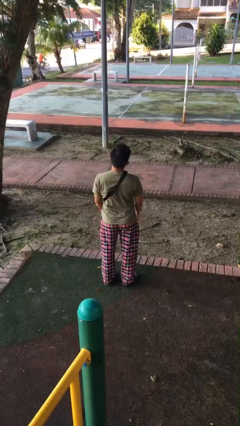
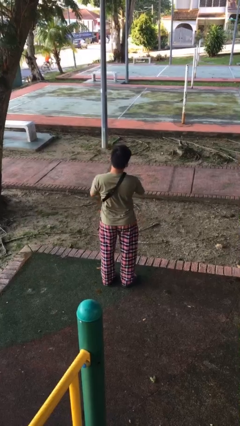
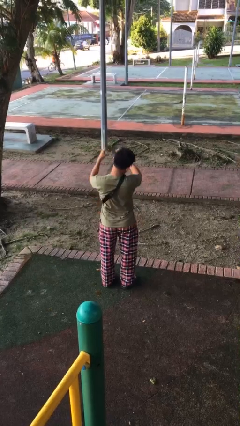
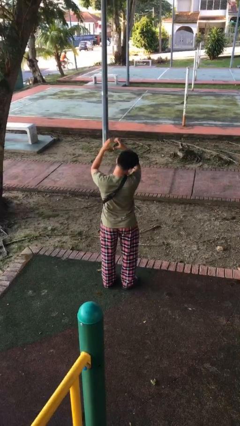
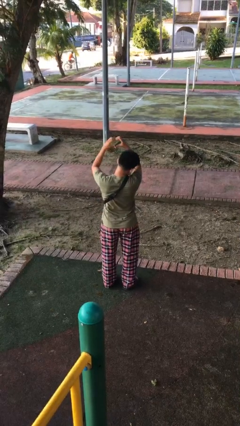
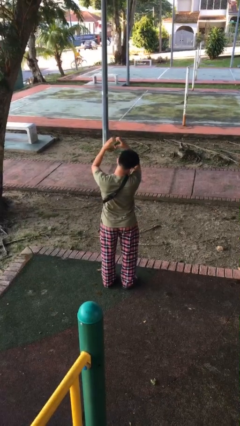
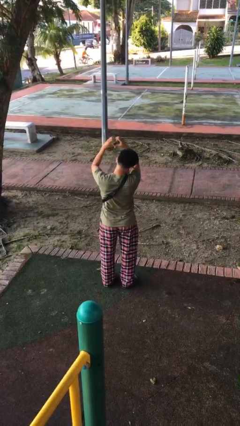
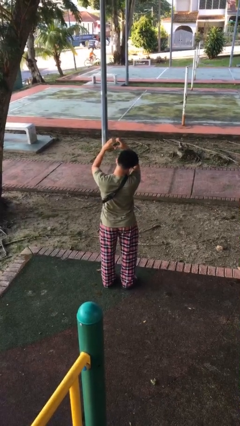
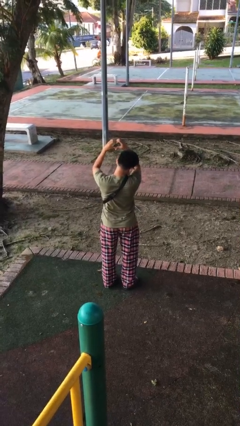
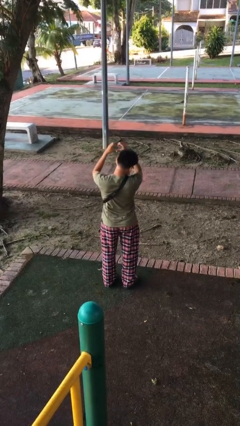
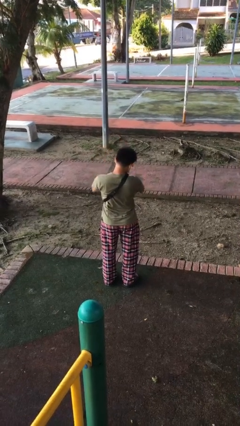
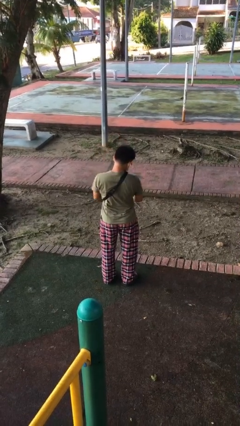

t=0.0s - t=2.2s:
person gestures heart

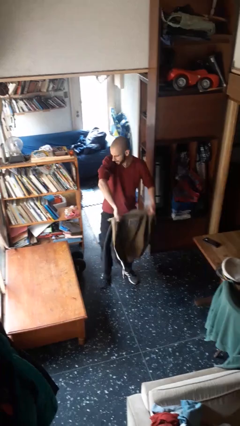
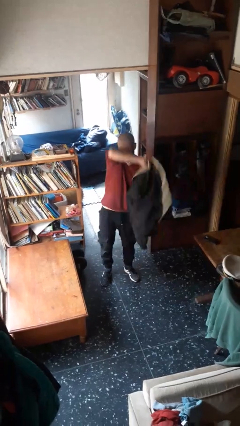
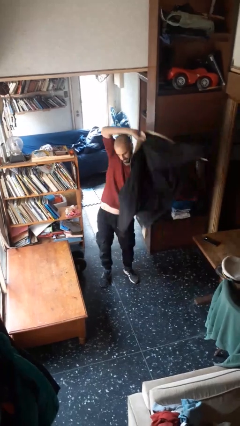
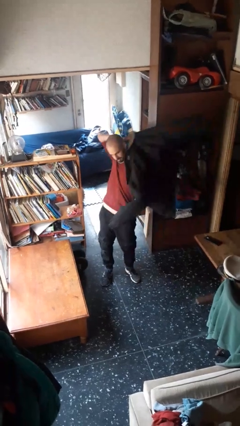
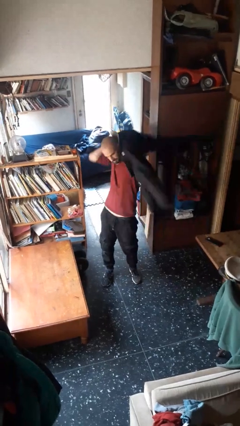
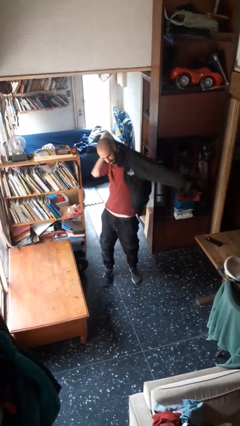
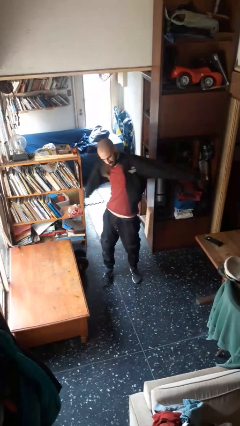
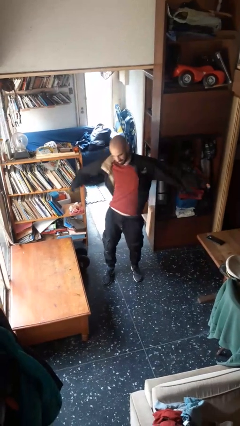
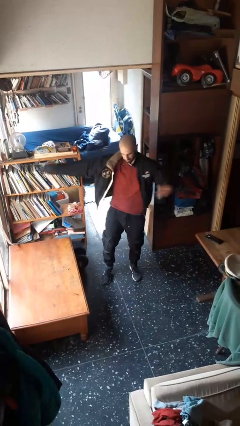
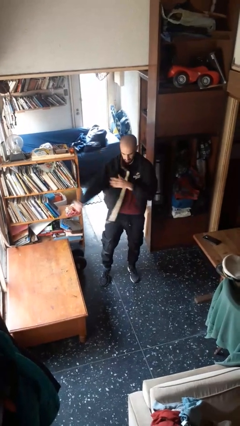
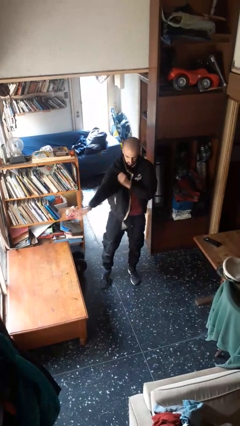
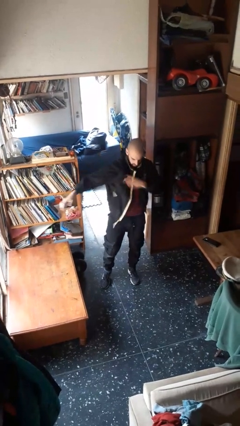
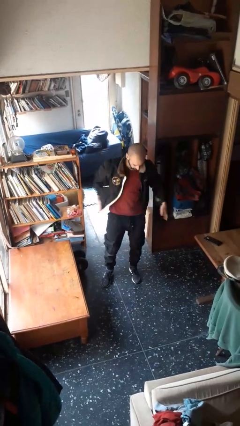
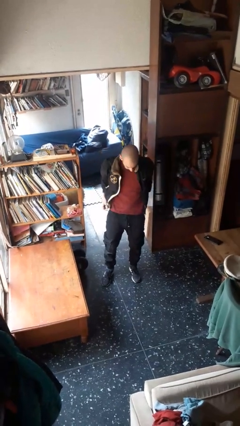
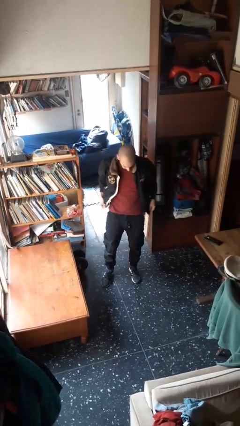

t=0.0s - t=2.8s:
person puts on jacket

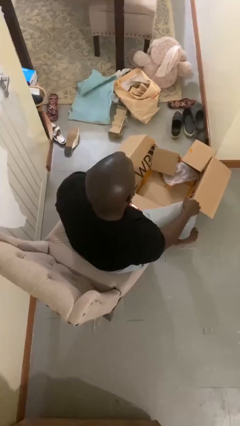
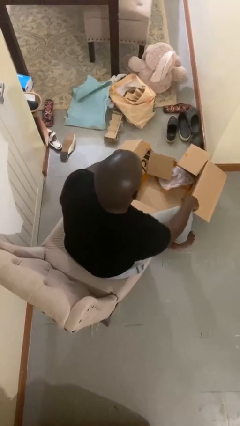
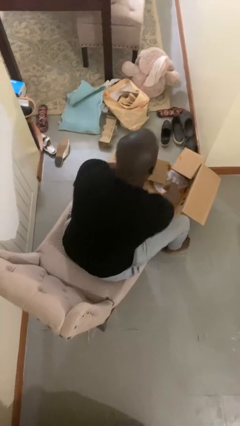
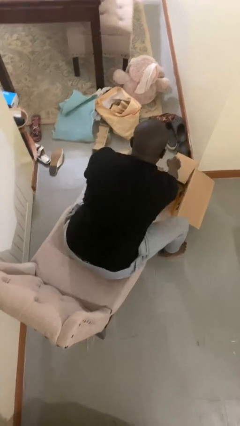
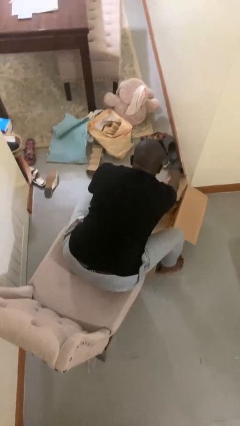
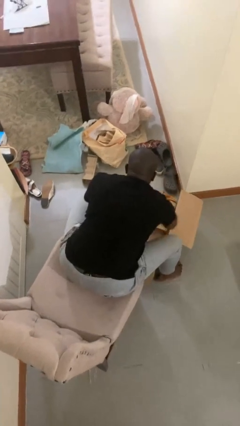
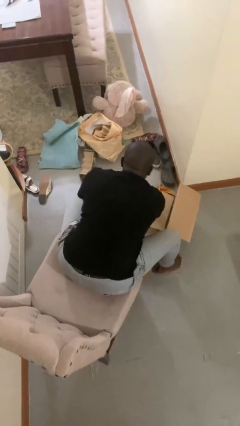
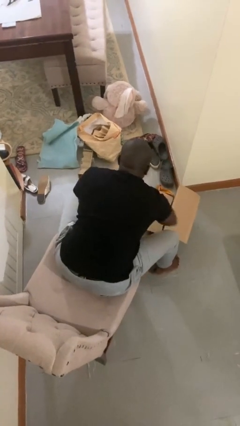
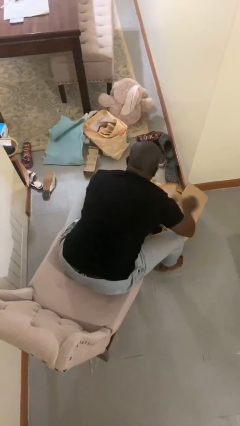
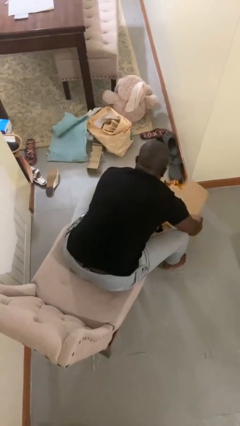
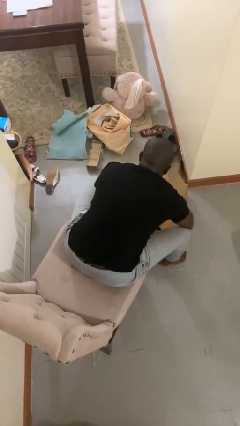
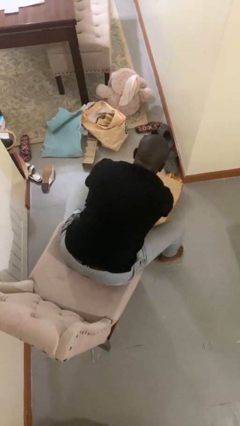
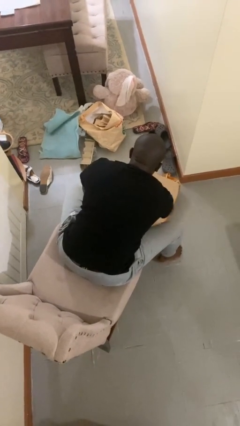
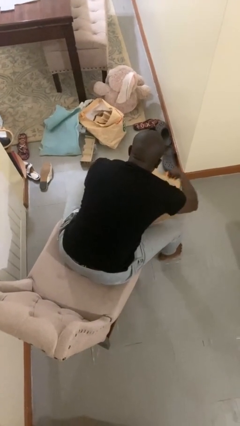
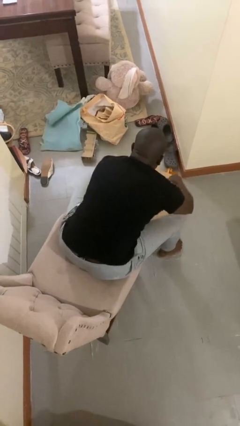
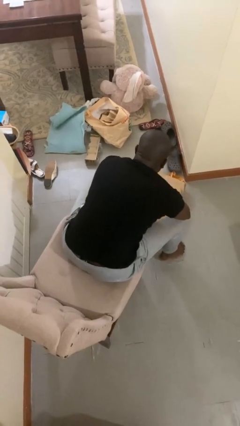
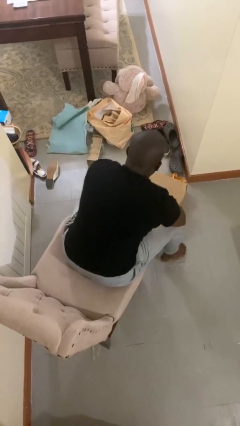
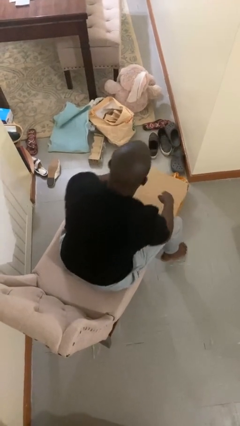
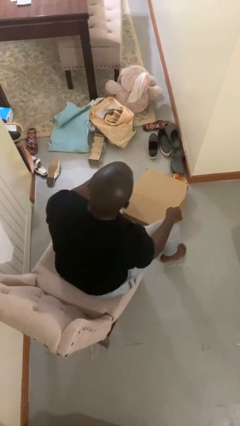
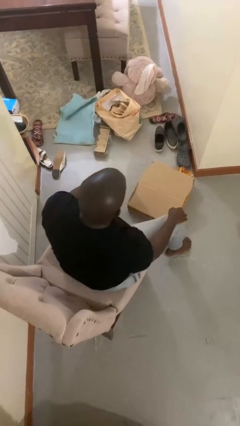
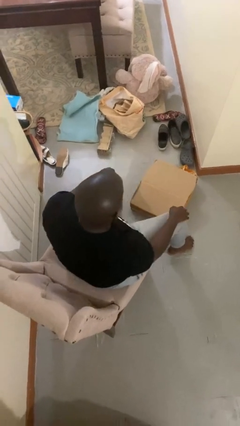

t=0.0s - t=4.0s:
person closes box

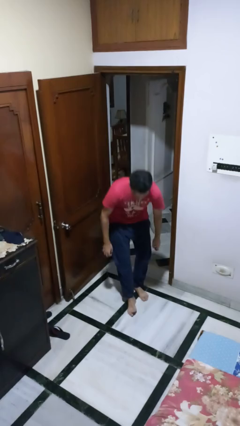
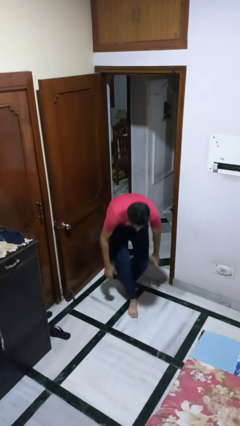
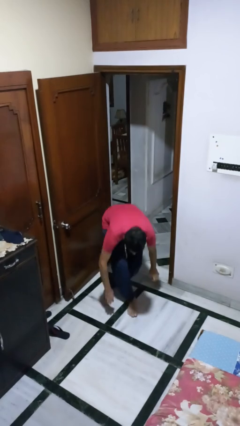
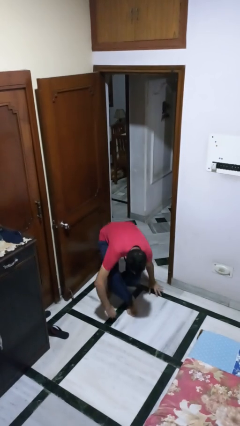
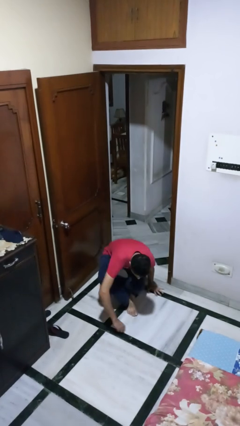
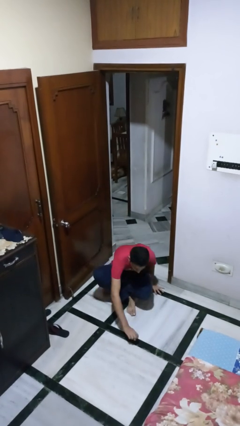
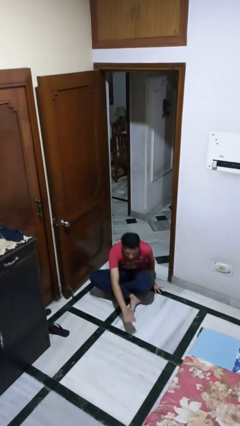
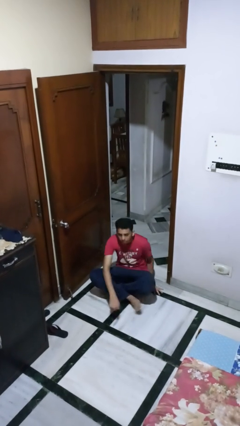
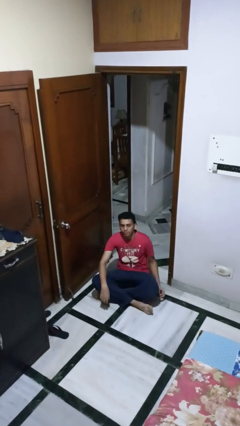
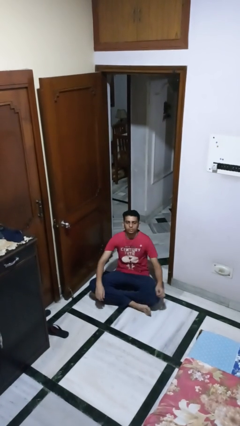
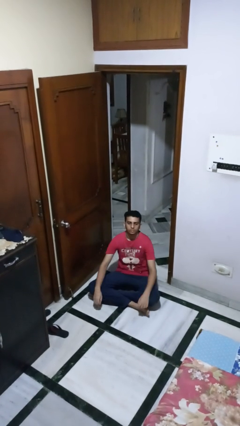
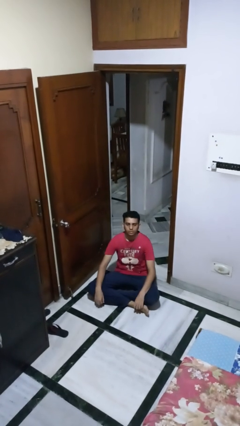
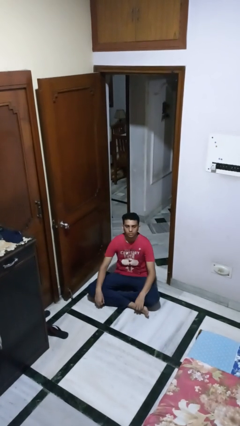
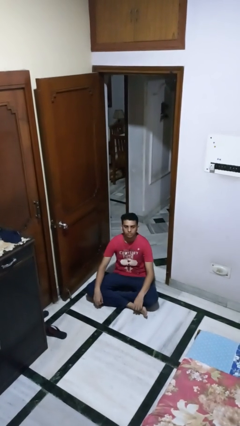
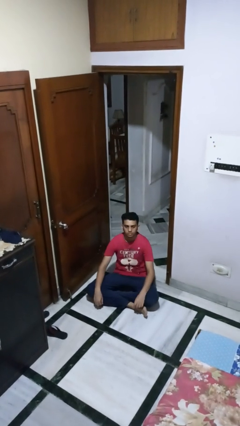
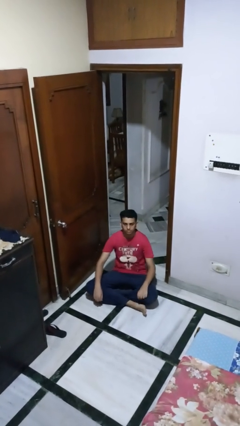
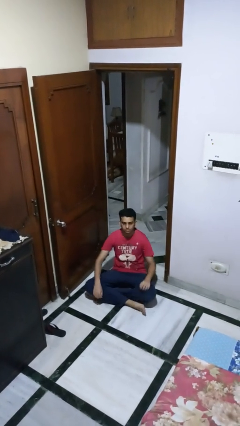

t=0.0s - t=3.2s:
person sits crisscross

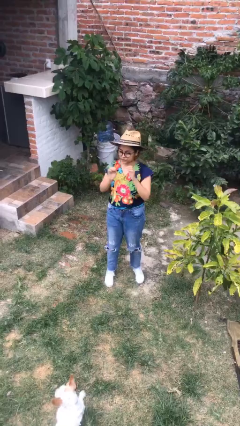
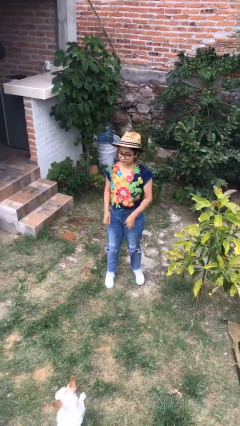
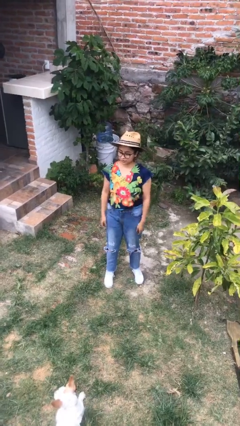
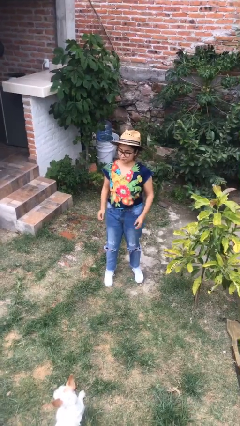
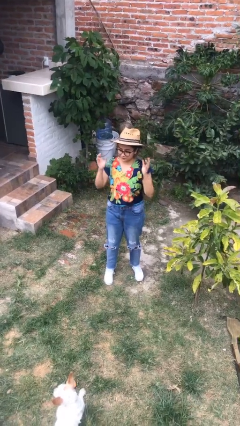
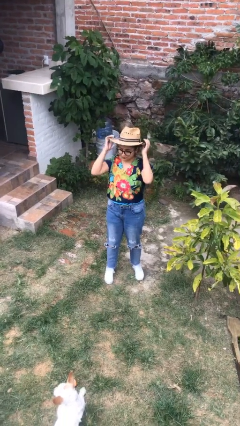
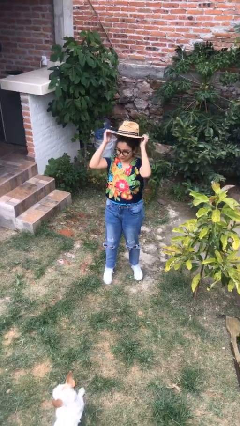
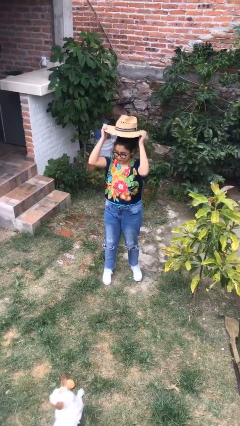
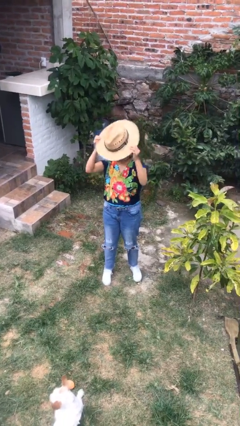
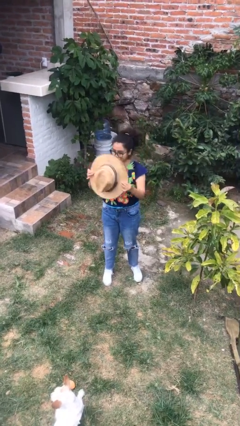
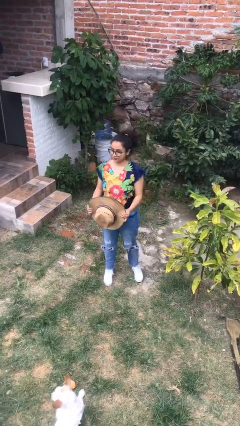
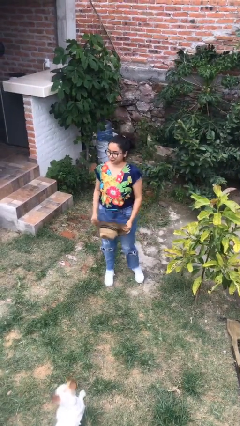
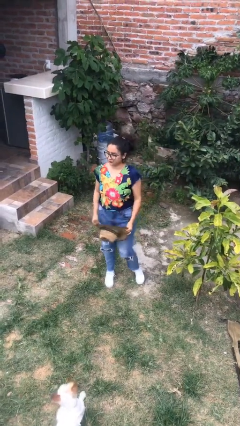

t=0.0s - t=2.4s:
person takes off hat

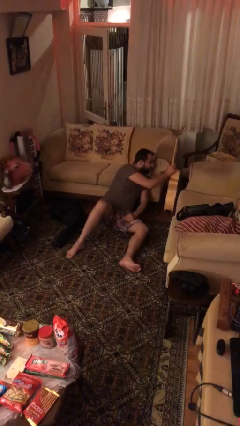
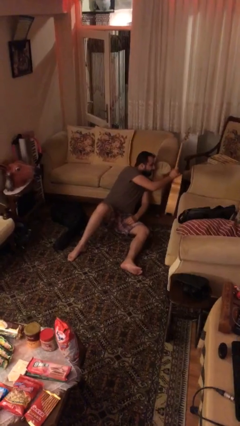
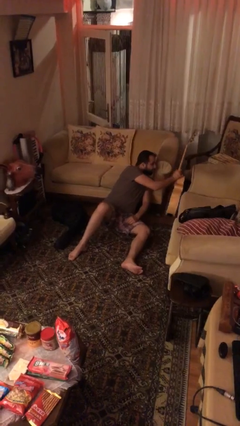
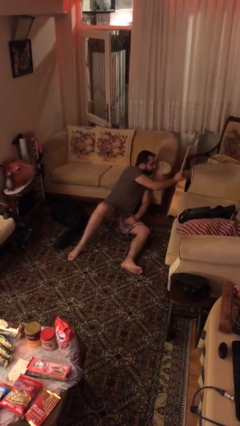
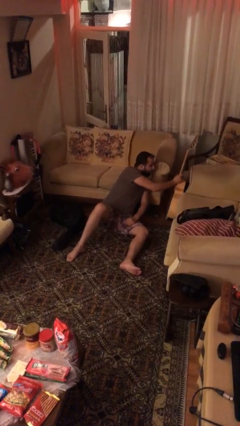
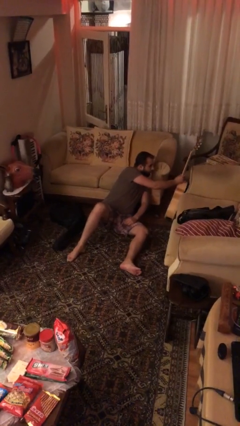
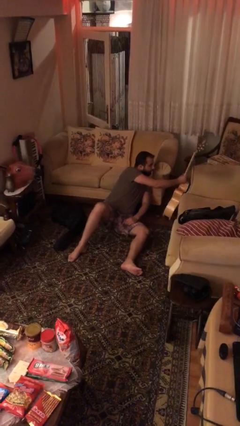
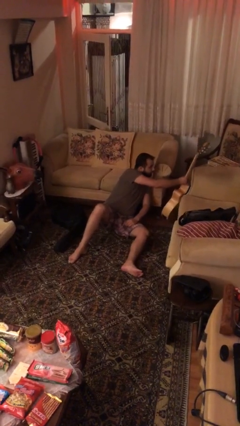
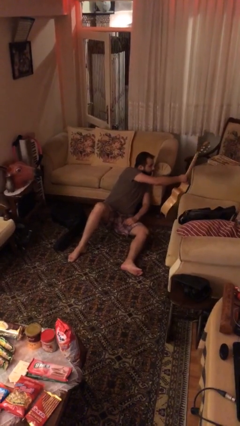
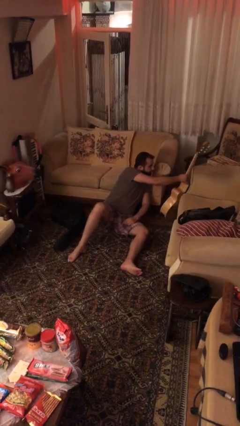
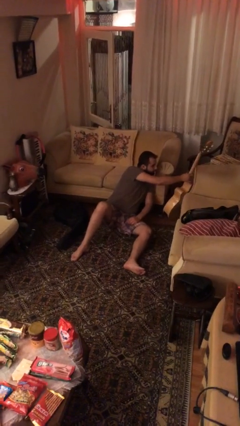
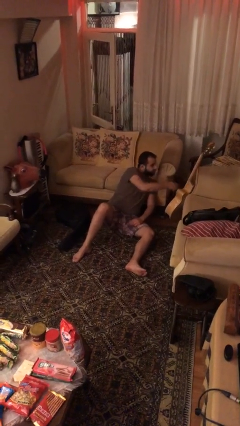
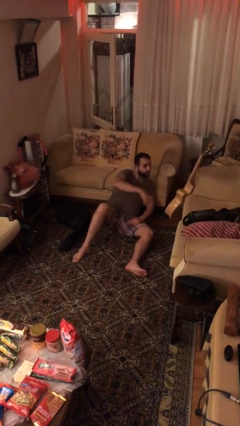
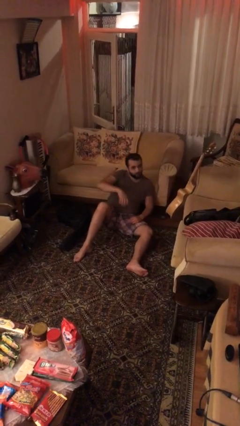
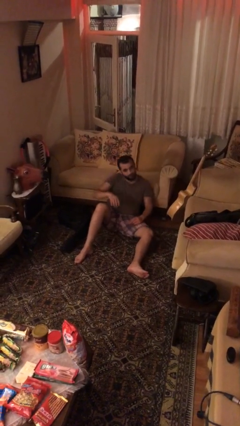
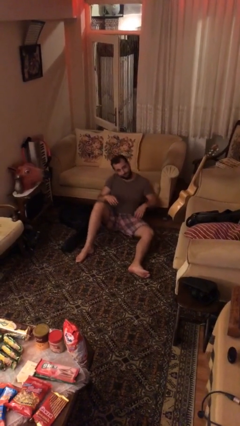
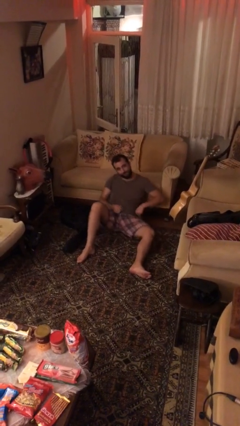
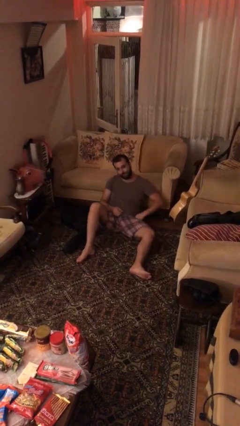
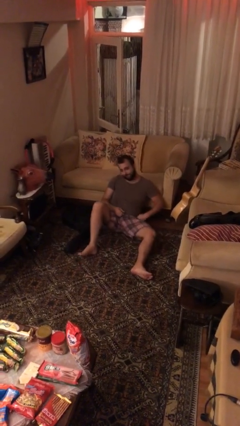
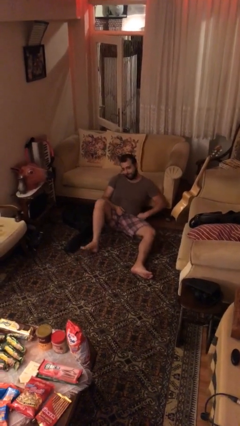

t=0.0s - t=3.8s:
person puts down object on floor
